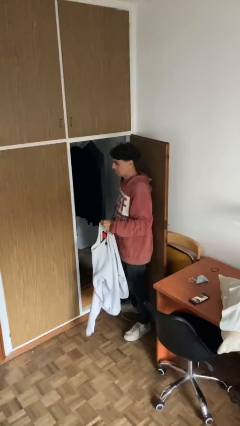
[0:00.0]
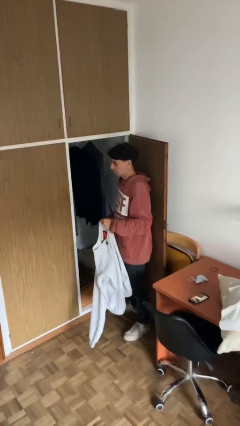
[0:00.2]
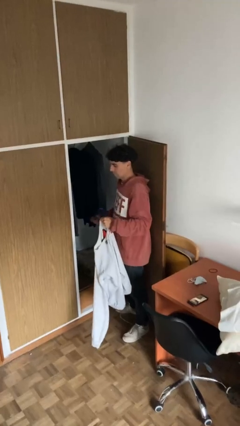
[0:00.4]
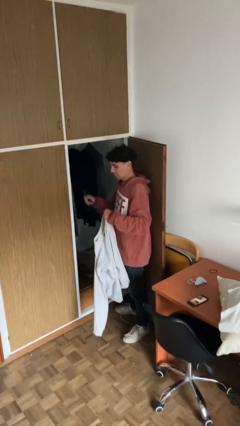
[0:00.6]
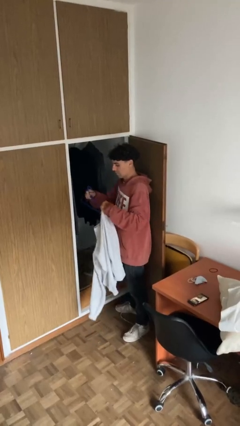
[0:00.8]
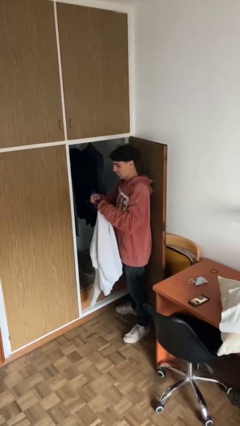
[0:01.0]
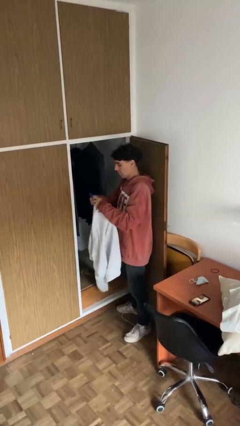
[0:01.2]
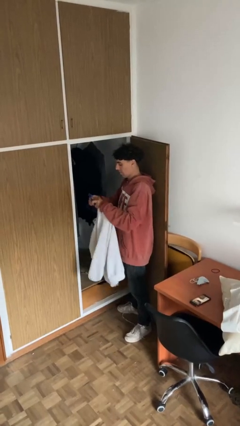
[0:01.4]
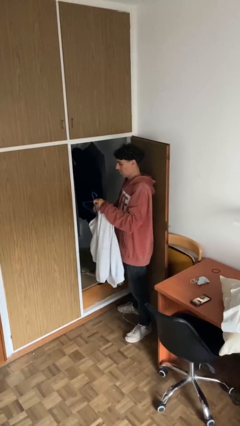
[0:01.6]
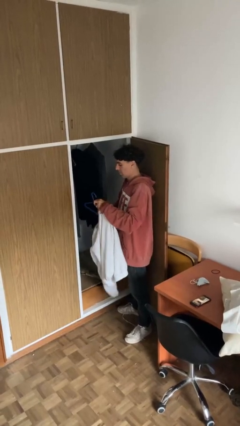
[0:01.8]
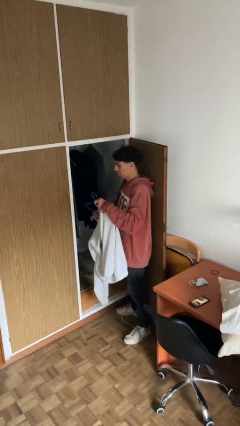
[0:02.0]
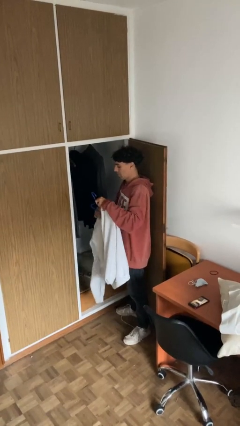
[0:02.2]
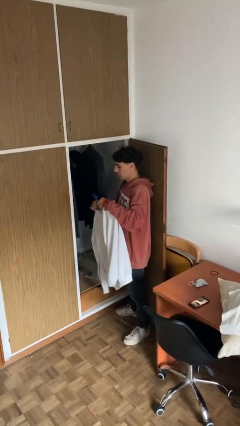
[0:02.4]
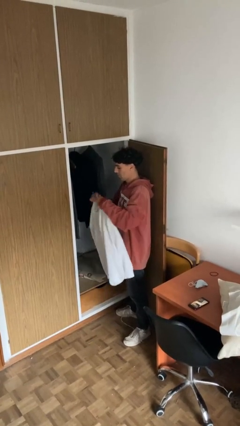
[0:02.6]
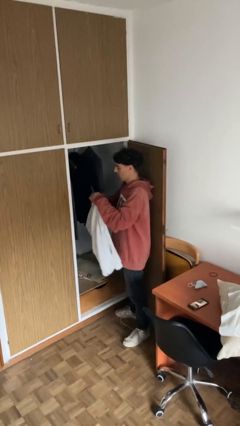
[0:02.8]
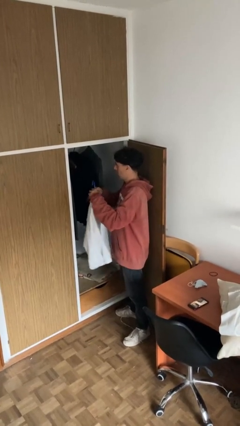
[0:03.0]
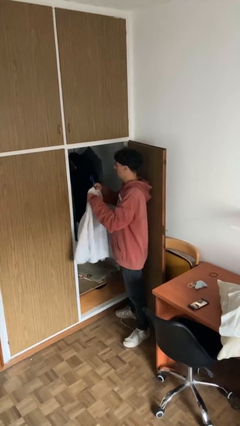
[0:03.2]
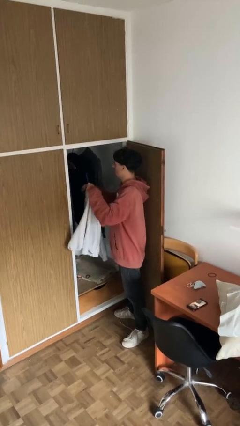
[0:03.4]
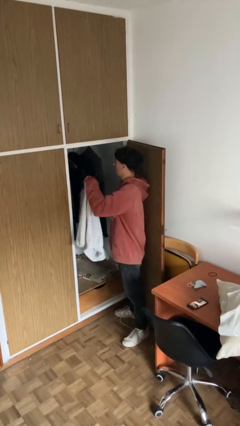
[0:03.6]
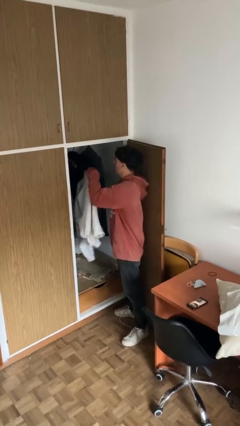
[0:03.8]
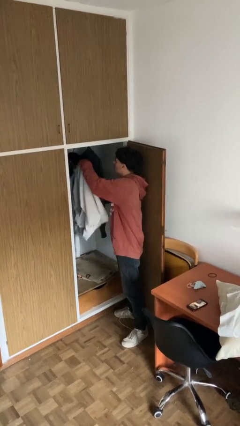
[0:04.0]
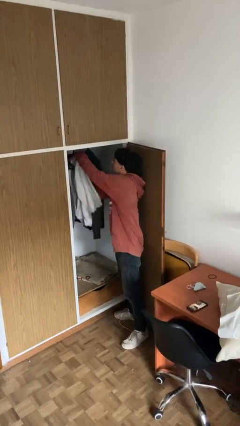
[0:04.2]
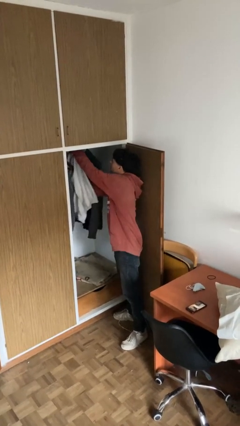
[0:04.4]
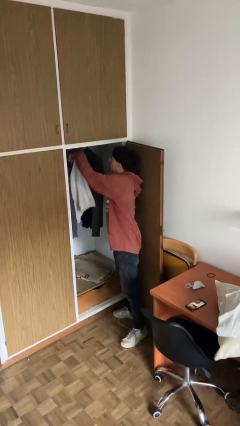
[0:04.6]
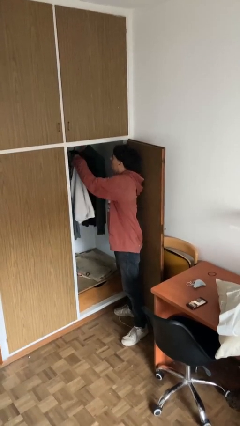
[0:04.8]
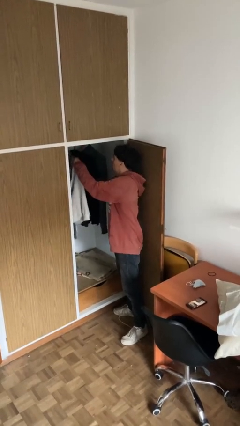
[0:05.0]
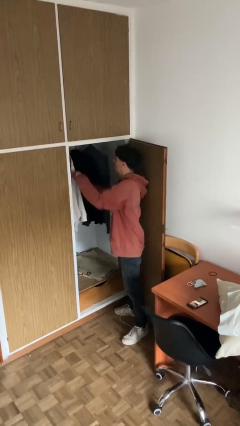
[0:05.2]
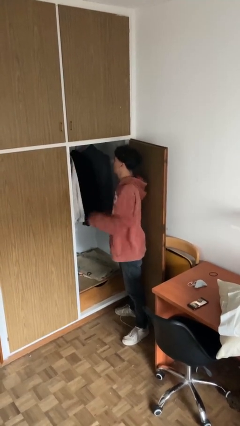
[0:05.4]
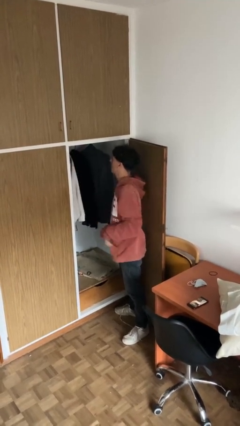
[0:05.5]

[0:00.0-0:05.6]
person puts clothes into closet

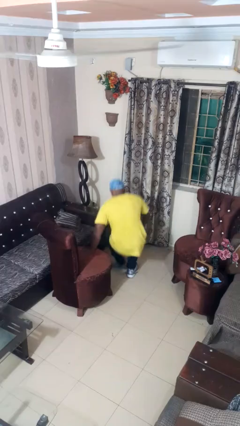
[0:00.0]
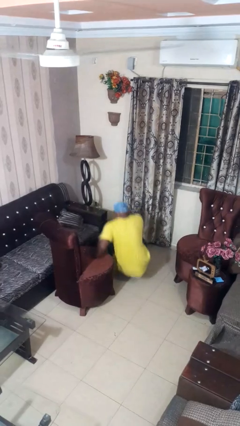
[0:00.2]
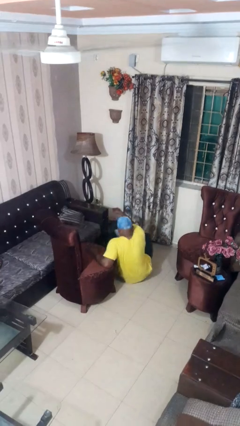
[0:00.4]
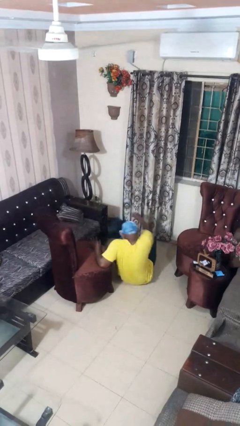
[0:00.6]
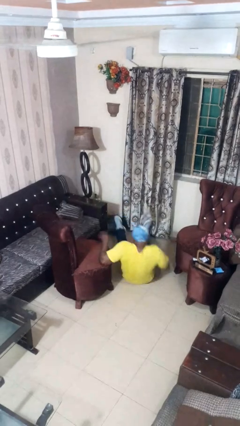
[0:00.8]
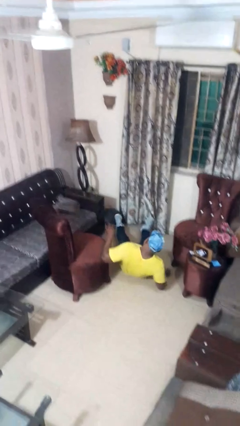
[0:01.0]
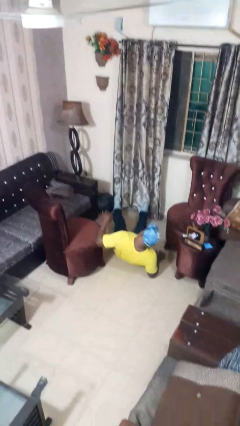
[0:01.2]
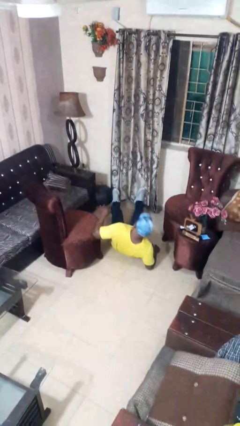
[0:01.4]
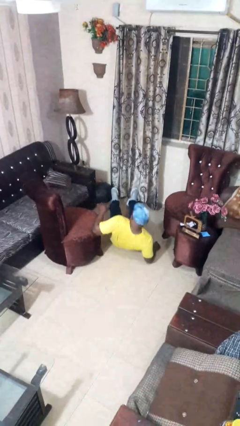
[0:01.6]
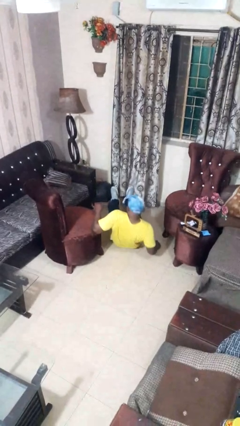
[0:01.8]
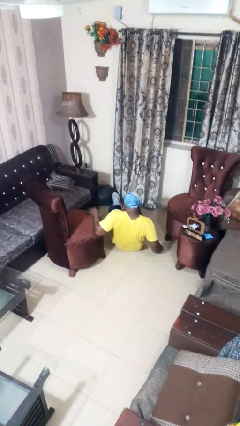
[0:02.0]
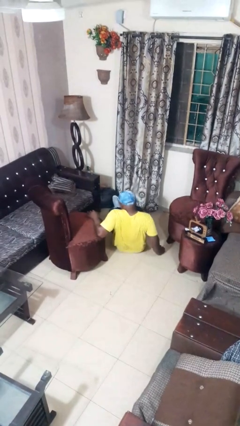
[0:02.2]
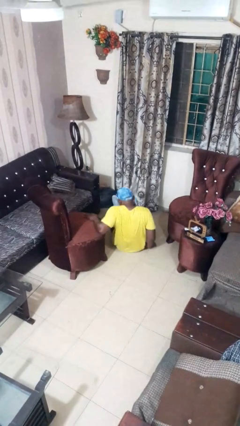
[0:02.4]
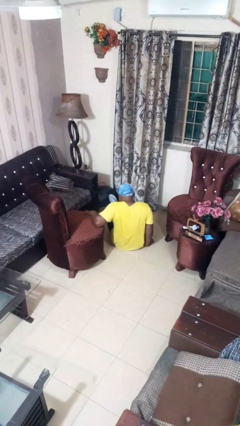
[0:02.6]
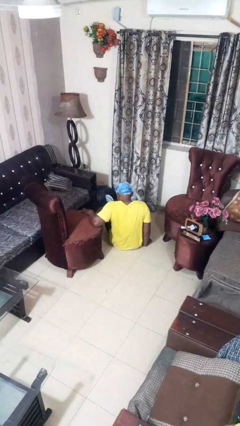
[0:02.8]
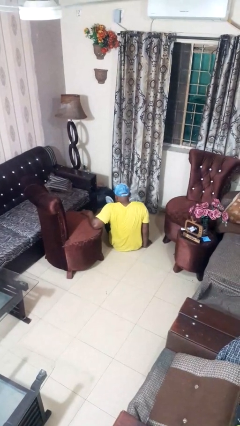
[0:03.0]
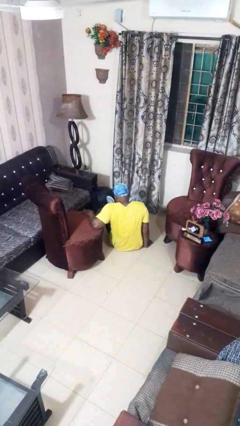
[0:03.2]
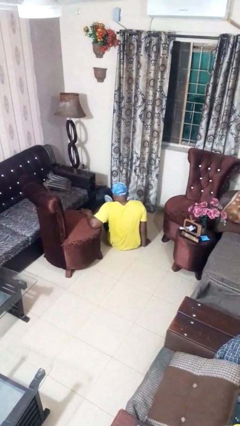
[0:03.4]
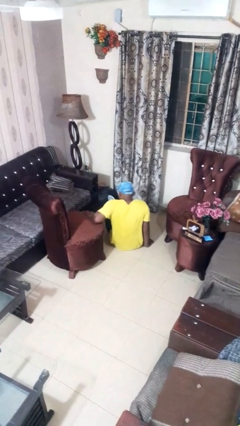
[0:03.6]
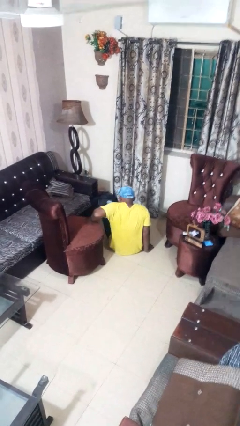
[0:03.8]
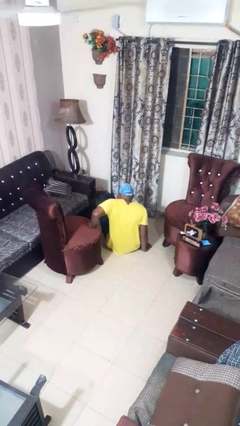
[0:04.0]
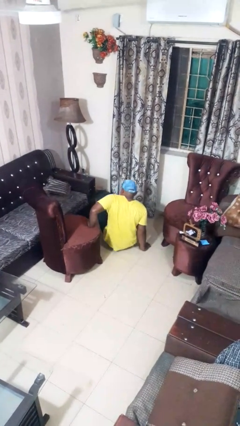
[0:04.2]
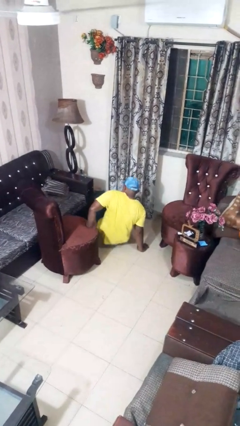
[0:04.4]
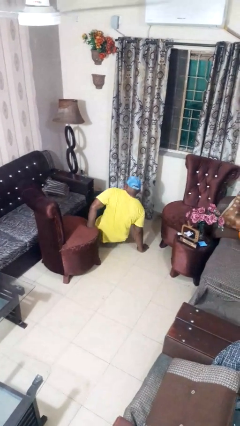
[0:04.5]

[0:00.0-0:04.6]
person falls from chair

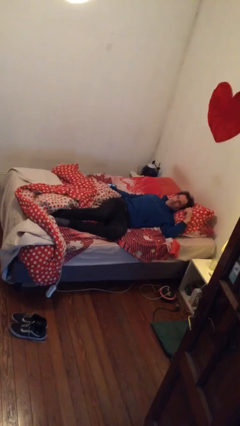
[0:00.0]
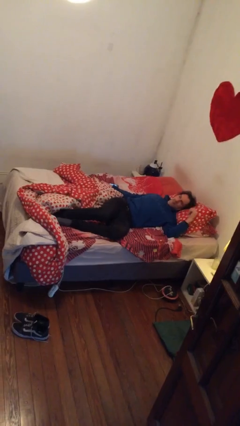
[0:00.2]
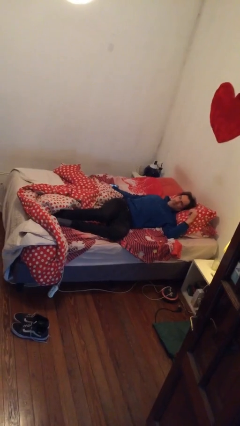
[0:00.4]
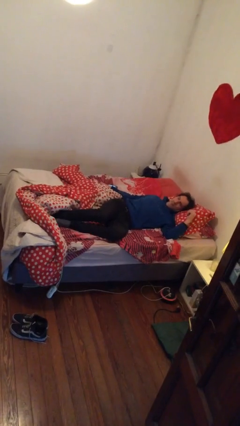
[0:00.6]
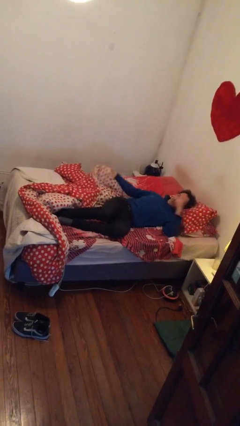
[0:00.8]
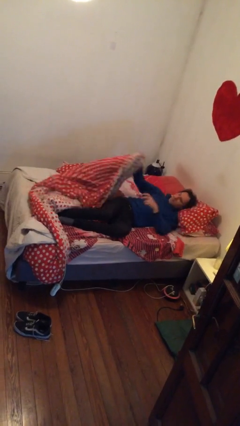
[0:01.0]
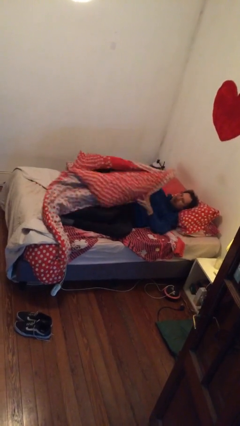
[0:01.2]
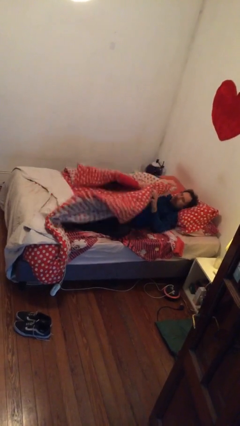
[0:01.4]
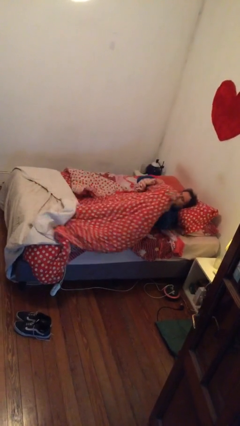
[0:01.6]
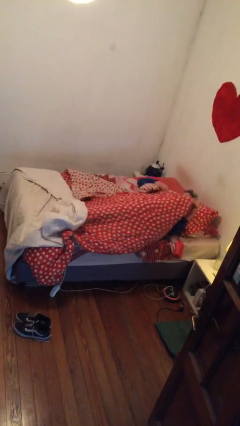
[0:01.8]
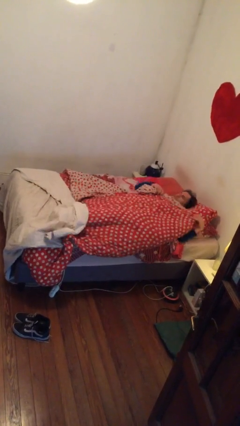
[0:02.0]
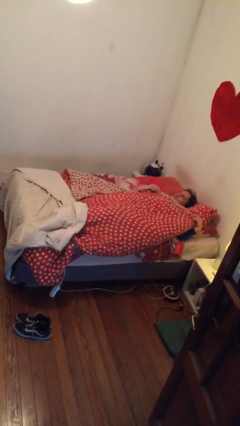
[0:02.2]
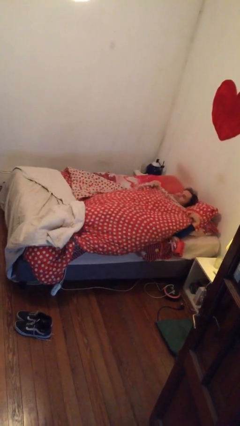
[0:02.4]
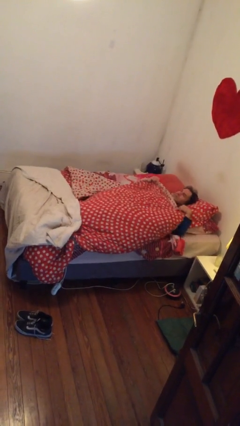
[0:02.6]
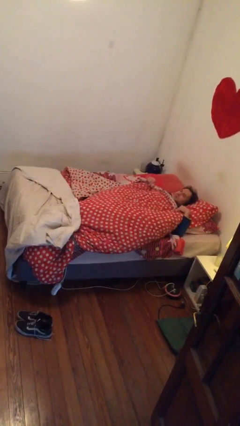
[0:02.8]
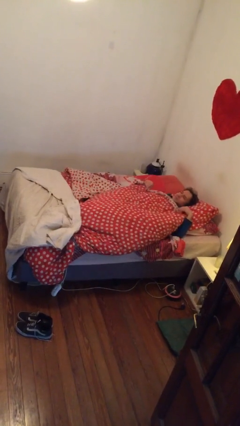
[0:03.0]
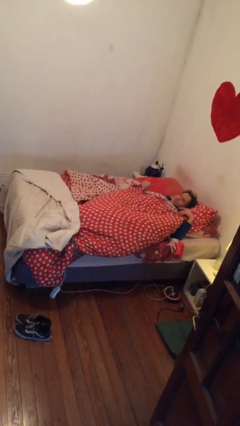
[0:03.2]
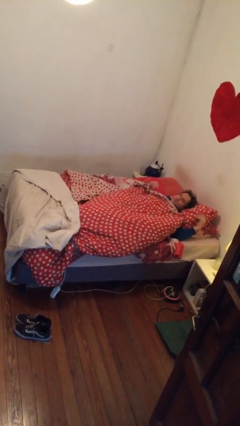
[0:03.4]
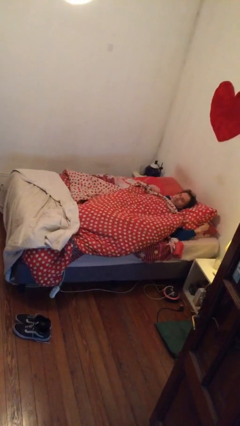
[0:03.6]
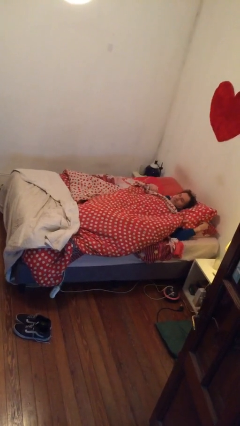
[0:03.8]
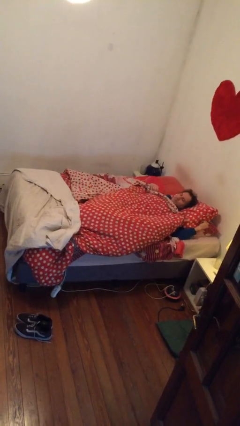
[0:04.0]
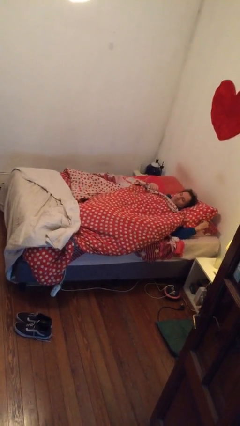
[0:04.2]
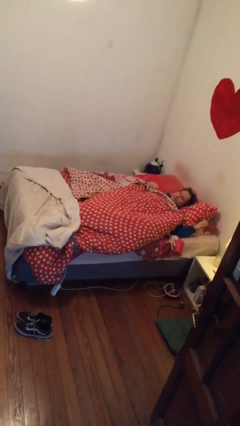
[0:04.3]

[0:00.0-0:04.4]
person covers with bedsheets

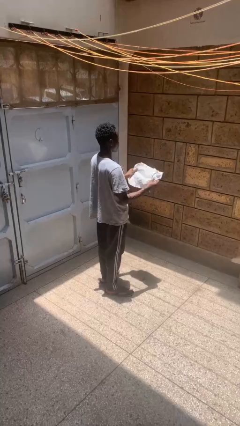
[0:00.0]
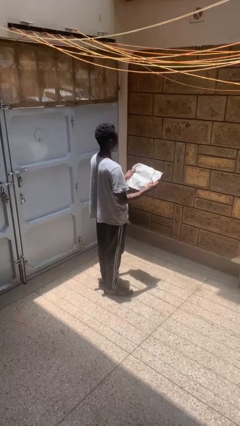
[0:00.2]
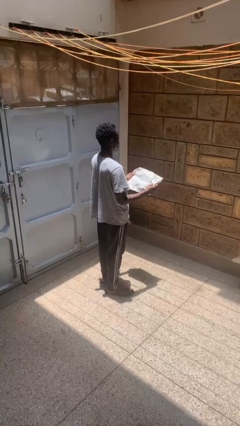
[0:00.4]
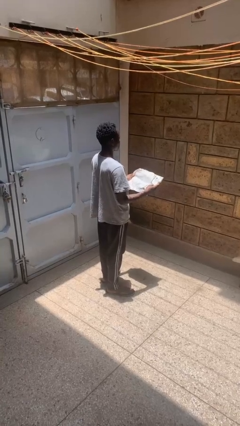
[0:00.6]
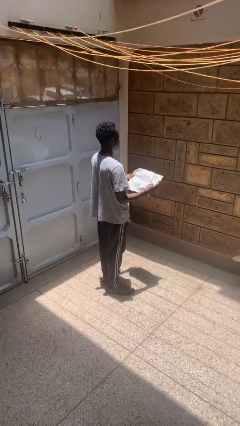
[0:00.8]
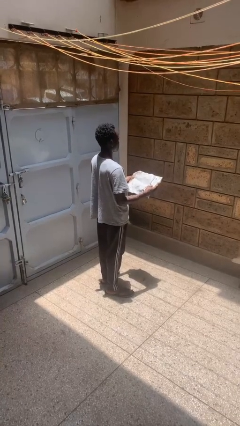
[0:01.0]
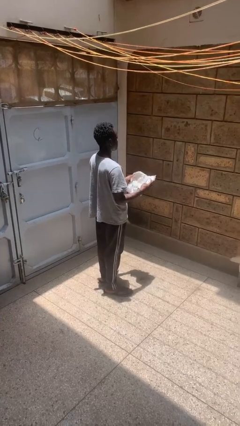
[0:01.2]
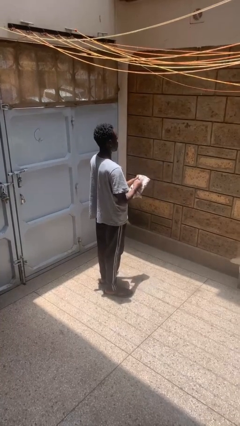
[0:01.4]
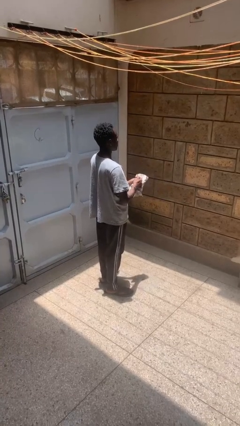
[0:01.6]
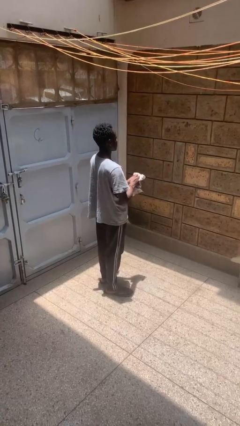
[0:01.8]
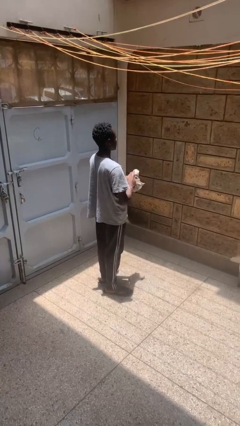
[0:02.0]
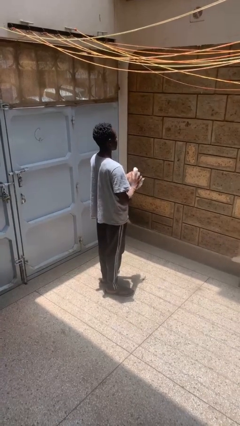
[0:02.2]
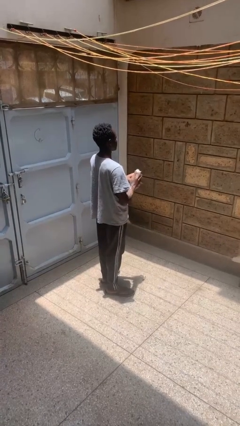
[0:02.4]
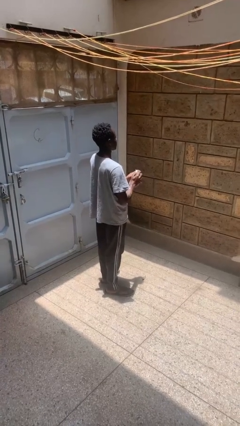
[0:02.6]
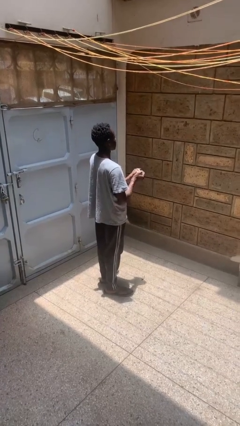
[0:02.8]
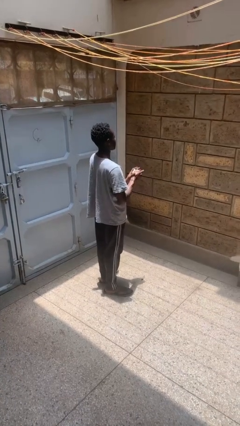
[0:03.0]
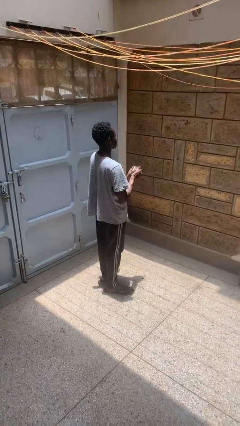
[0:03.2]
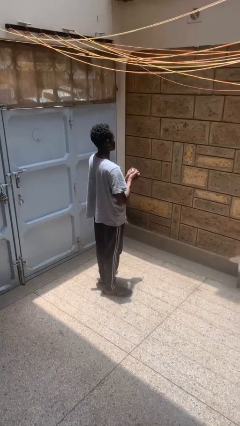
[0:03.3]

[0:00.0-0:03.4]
person crumples paper
